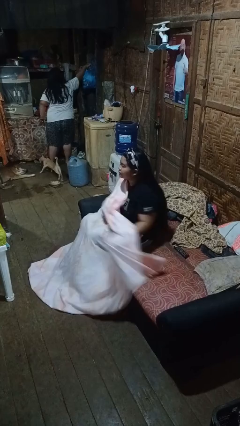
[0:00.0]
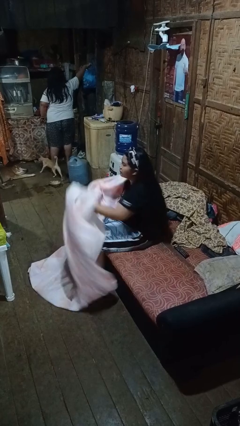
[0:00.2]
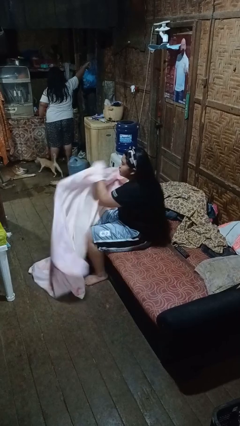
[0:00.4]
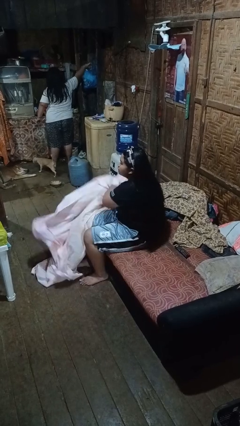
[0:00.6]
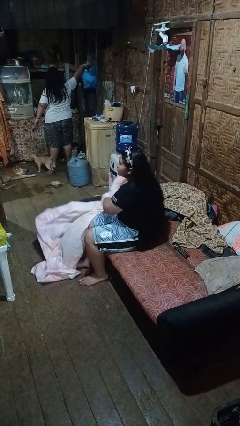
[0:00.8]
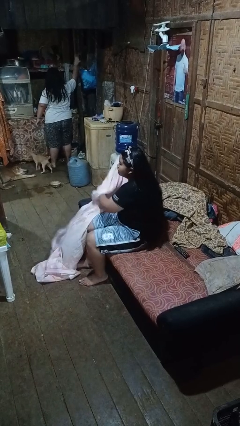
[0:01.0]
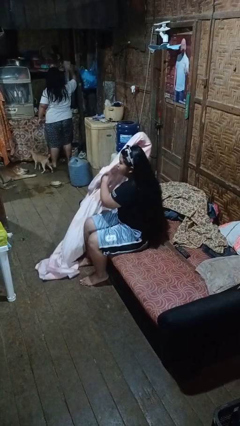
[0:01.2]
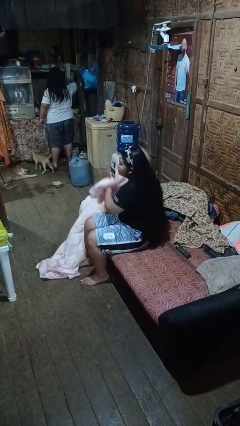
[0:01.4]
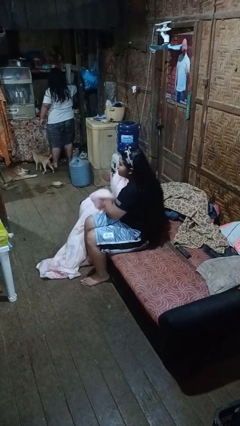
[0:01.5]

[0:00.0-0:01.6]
person uncovers with blanket

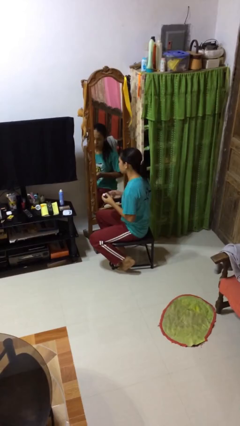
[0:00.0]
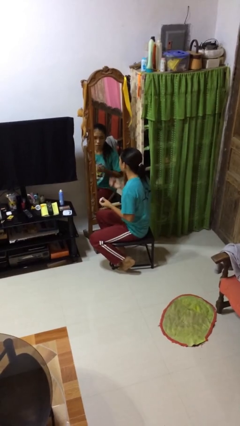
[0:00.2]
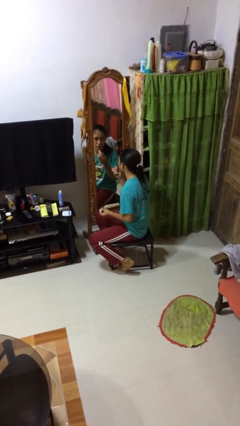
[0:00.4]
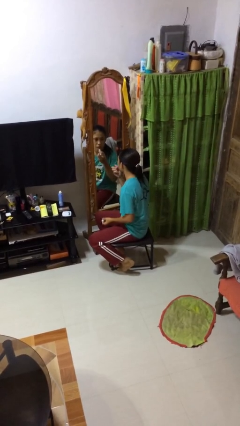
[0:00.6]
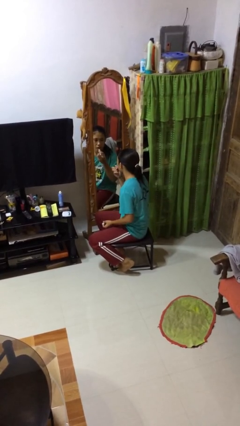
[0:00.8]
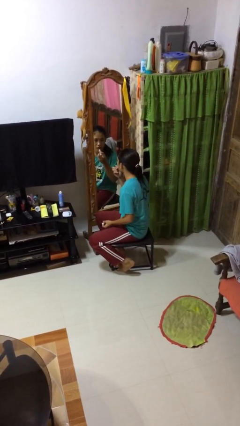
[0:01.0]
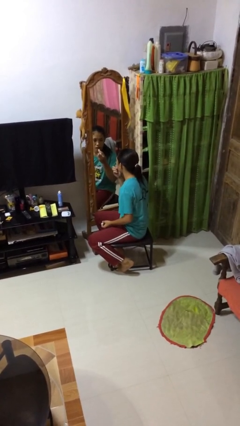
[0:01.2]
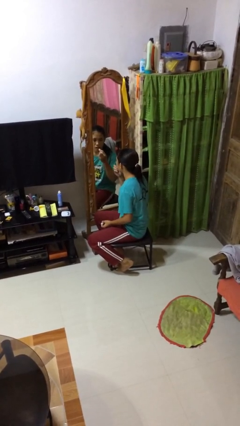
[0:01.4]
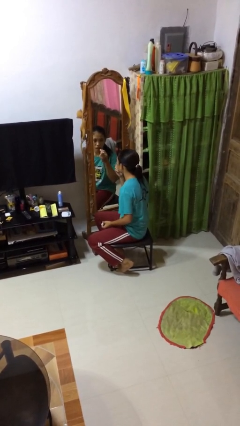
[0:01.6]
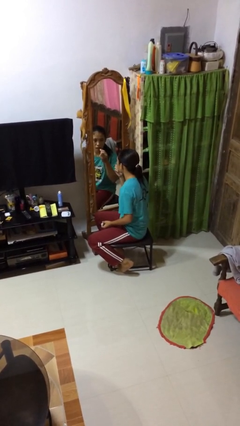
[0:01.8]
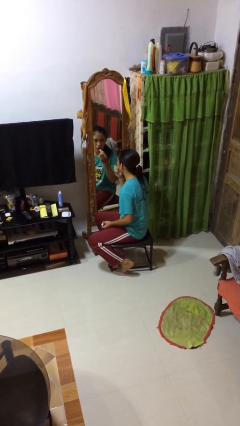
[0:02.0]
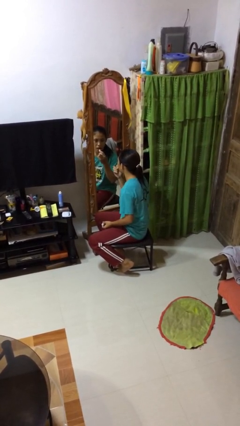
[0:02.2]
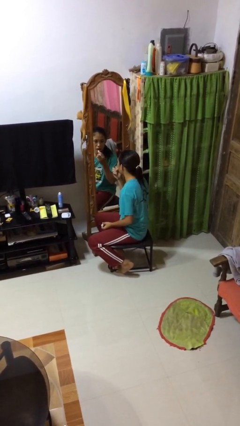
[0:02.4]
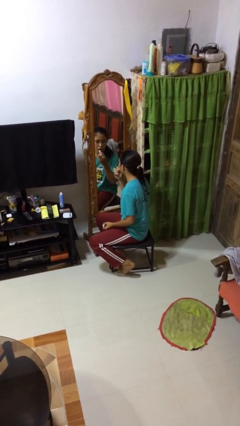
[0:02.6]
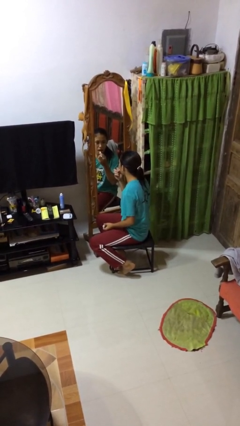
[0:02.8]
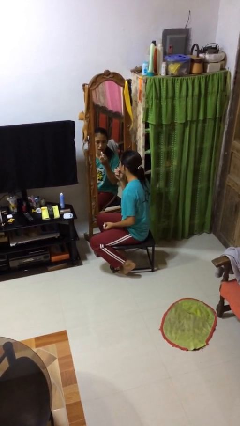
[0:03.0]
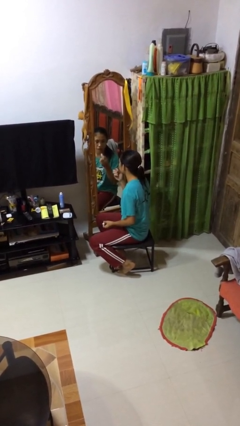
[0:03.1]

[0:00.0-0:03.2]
person applies lip makeup

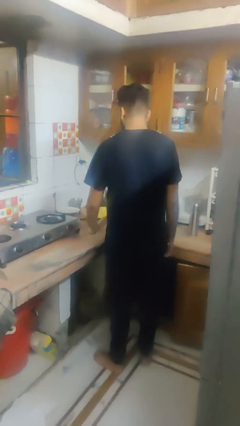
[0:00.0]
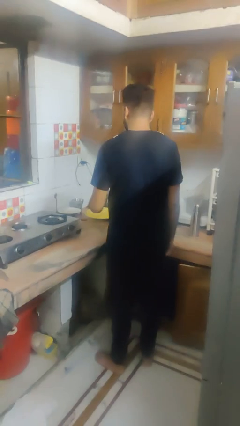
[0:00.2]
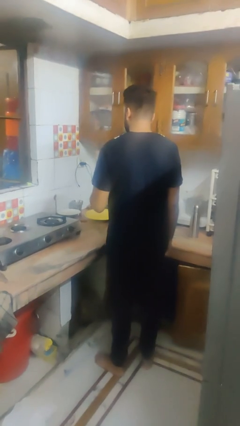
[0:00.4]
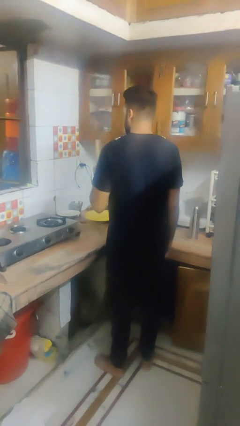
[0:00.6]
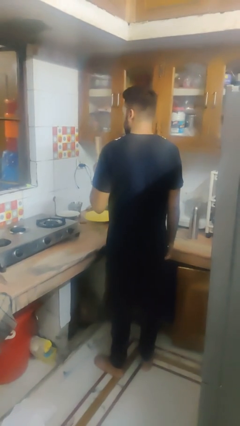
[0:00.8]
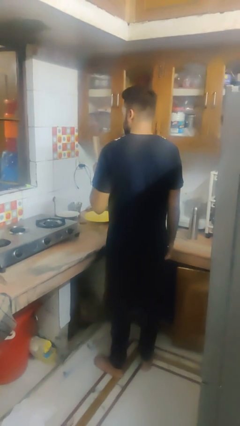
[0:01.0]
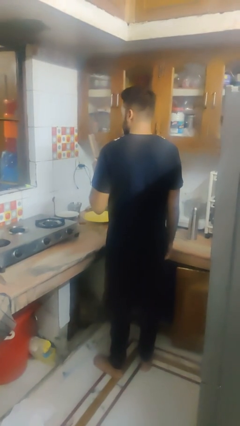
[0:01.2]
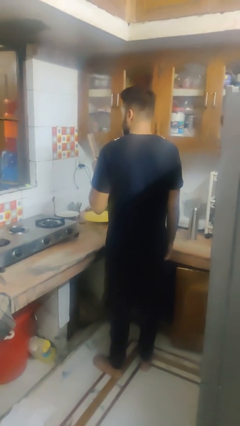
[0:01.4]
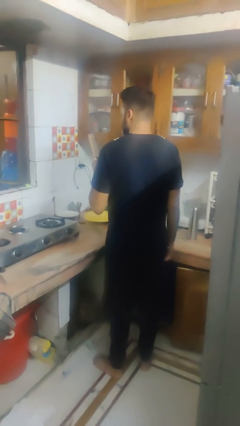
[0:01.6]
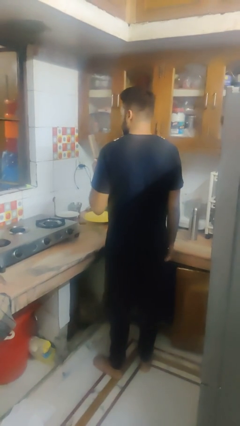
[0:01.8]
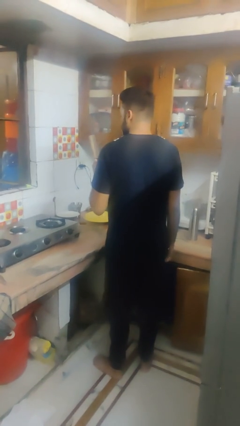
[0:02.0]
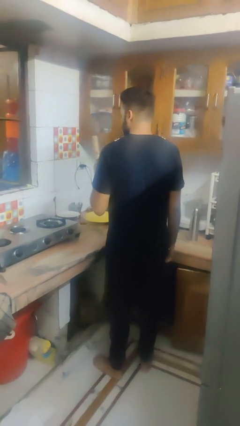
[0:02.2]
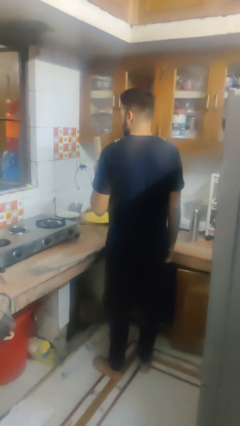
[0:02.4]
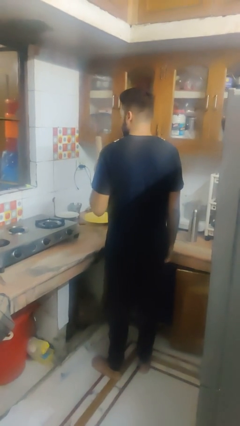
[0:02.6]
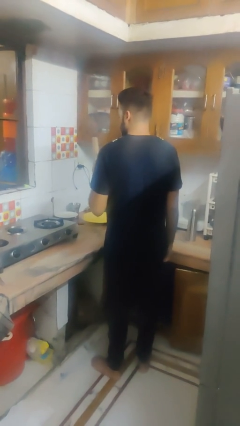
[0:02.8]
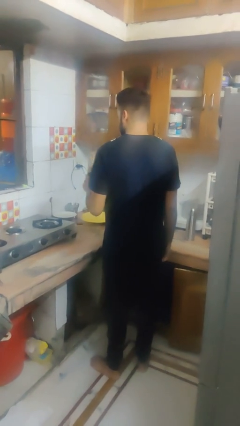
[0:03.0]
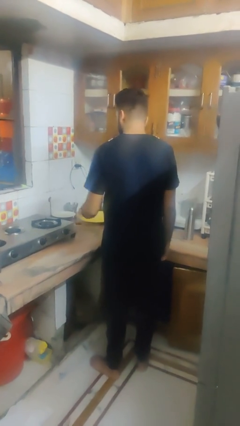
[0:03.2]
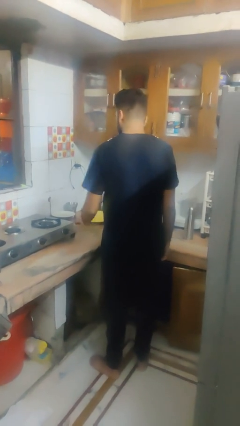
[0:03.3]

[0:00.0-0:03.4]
person picks up object from cabinet

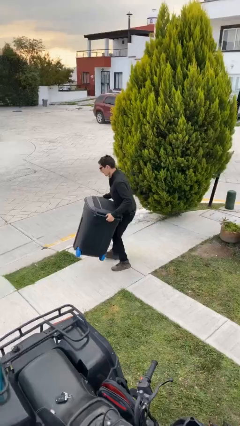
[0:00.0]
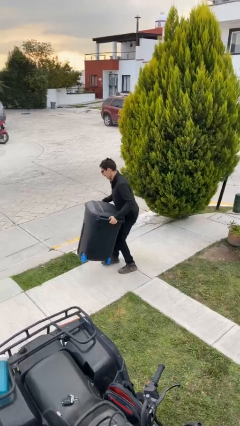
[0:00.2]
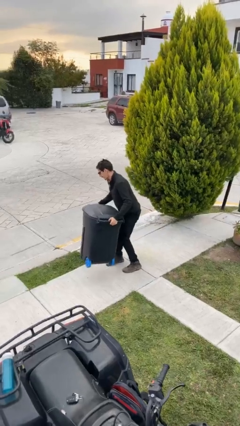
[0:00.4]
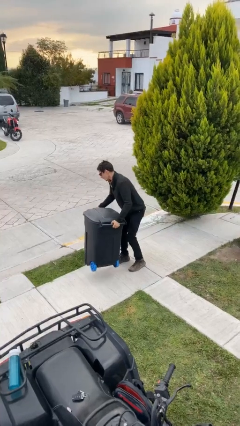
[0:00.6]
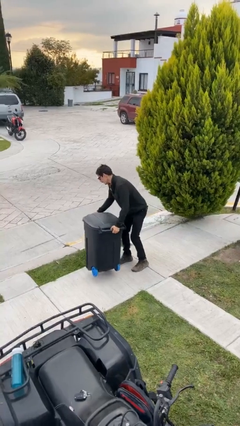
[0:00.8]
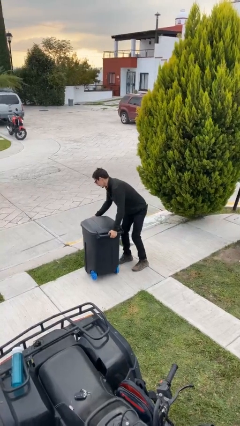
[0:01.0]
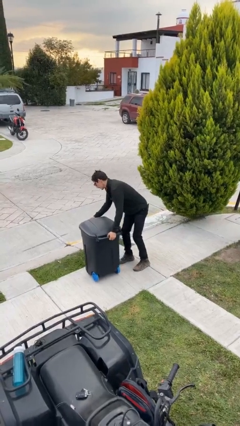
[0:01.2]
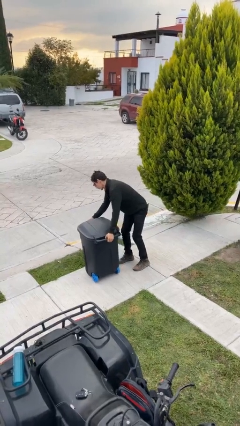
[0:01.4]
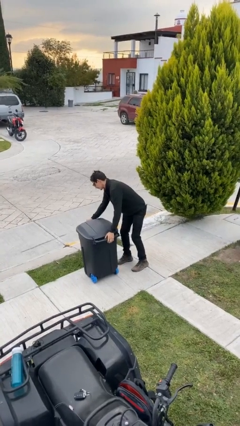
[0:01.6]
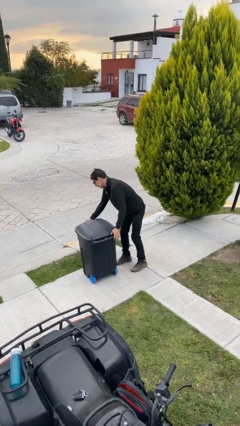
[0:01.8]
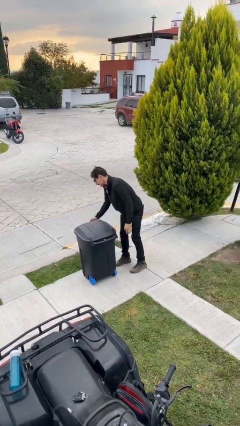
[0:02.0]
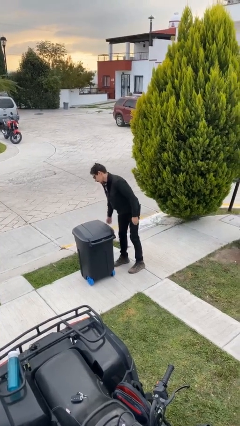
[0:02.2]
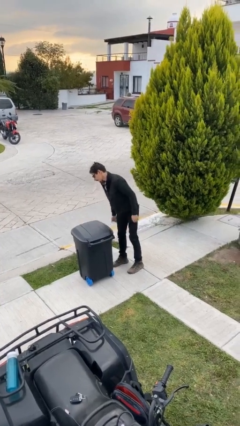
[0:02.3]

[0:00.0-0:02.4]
person puts down object on floor

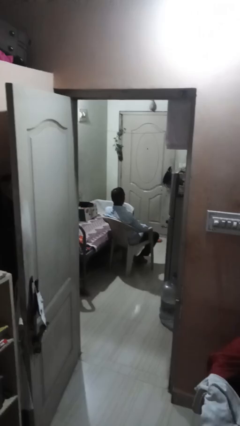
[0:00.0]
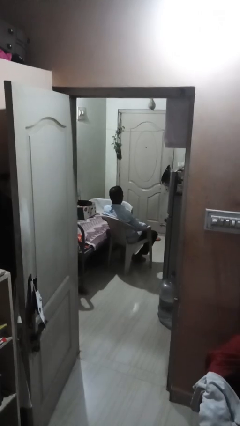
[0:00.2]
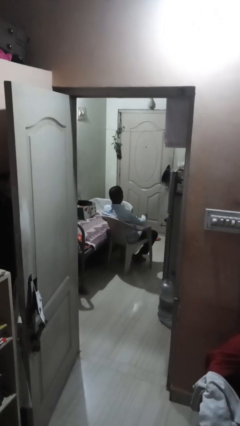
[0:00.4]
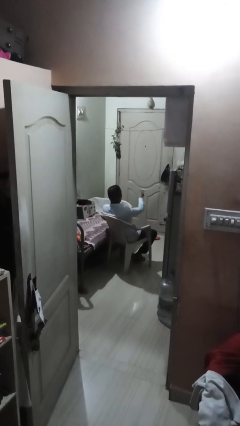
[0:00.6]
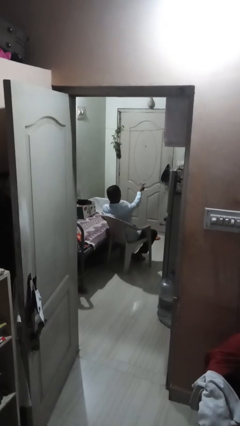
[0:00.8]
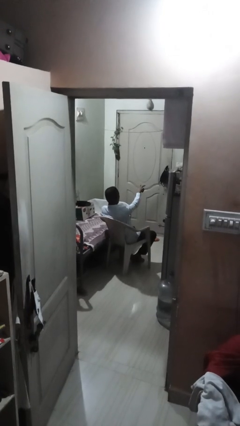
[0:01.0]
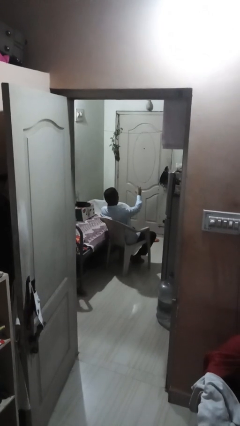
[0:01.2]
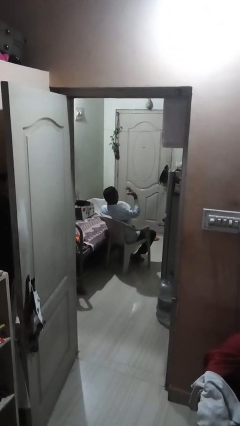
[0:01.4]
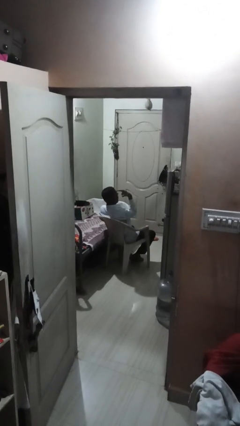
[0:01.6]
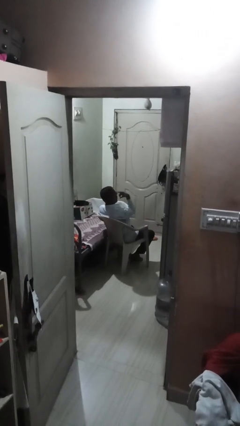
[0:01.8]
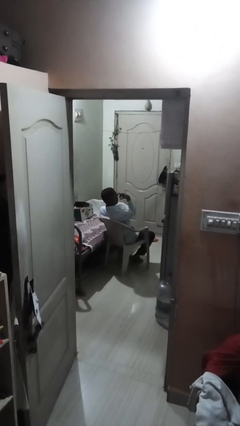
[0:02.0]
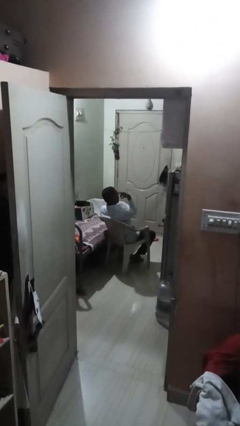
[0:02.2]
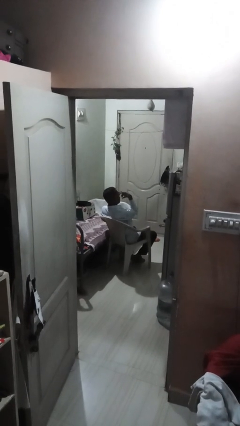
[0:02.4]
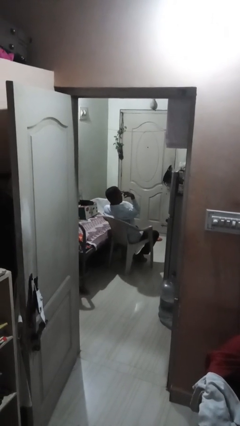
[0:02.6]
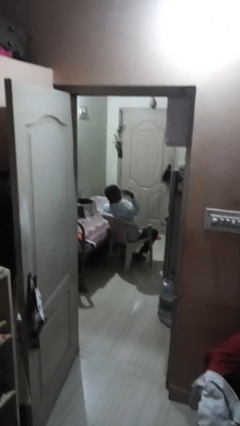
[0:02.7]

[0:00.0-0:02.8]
person gestures watch closely

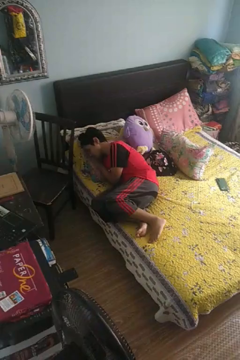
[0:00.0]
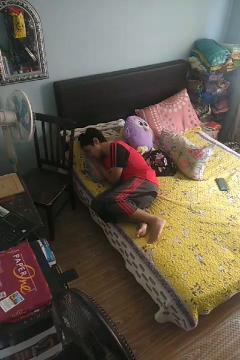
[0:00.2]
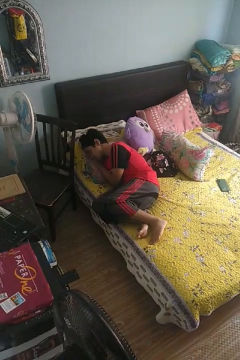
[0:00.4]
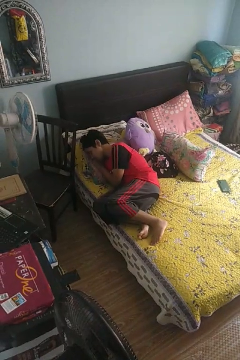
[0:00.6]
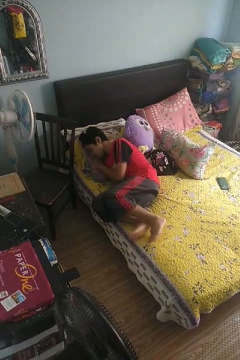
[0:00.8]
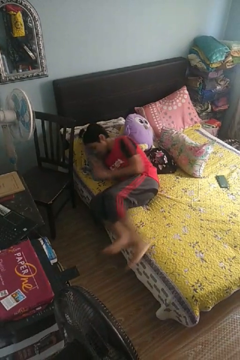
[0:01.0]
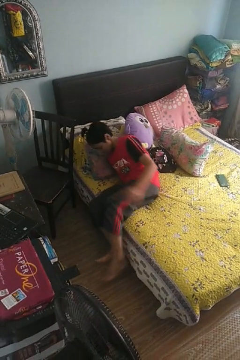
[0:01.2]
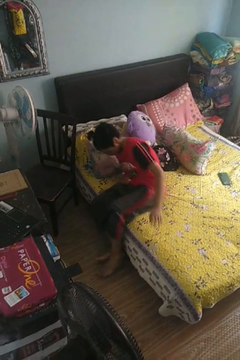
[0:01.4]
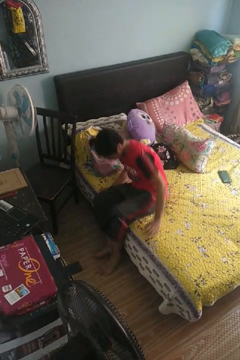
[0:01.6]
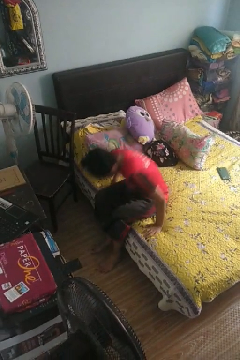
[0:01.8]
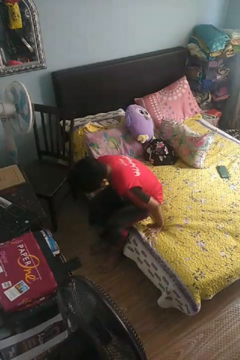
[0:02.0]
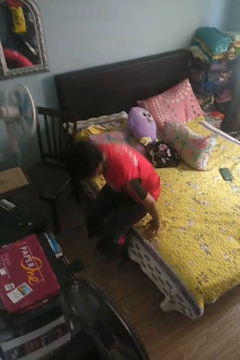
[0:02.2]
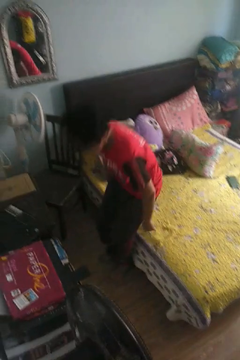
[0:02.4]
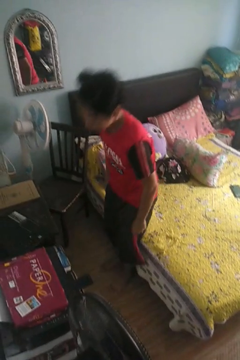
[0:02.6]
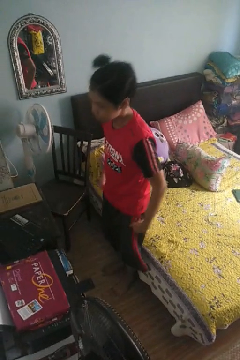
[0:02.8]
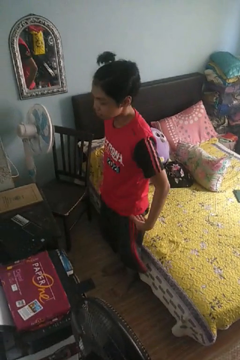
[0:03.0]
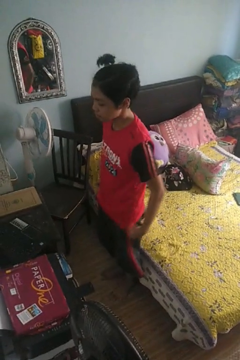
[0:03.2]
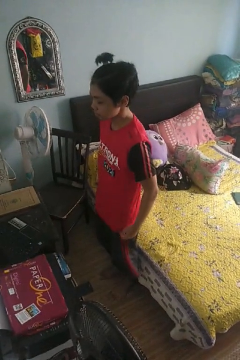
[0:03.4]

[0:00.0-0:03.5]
person stands up

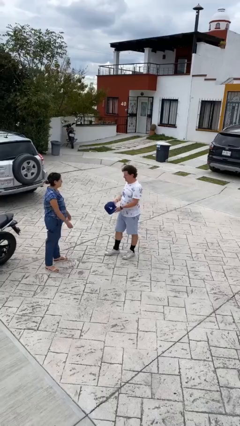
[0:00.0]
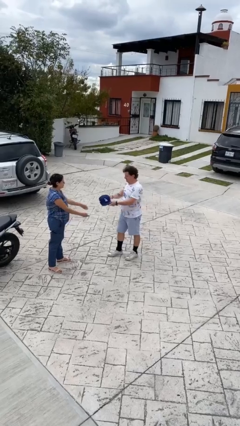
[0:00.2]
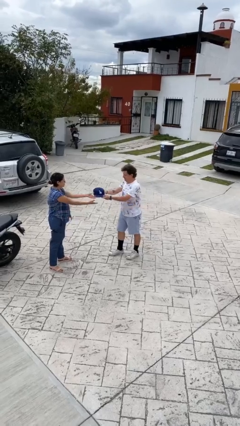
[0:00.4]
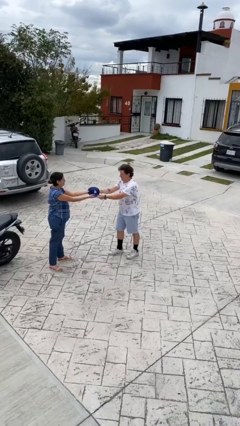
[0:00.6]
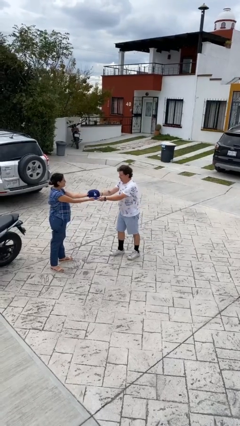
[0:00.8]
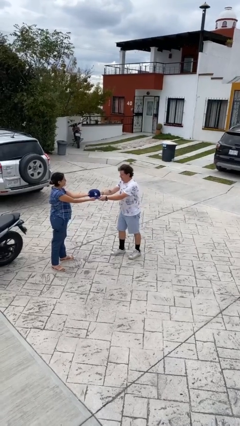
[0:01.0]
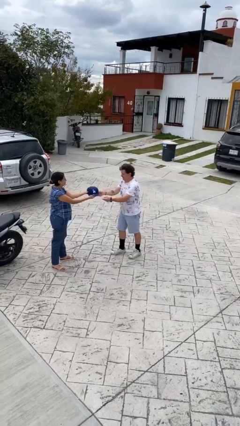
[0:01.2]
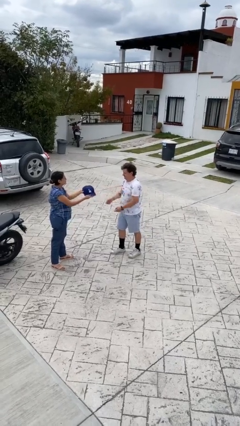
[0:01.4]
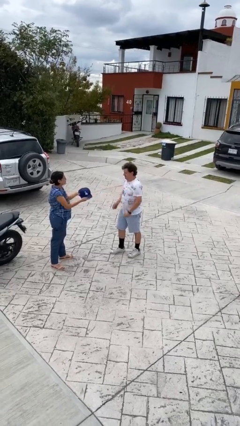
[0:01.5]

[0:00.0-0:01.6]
person transfers object to person
